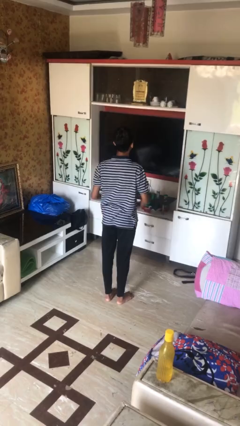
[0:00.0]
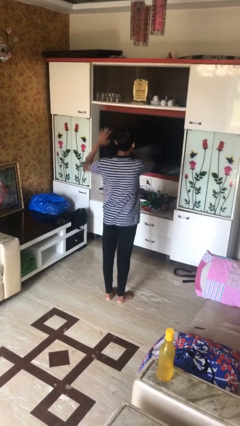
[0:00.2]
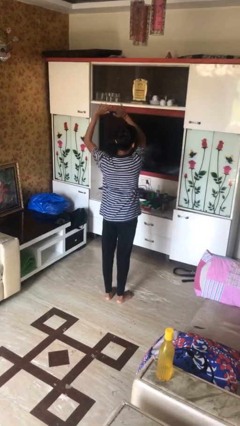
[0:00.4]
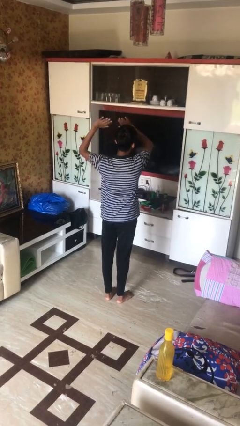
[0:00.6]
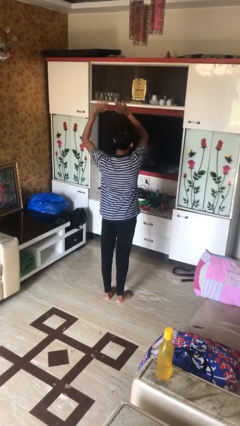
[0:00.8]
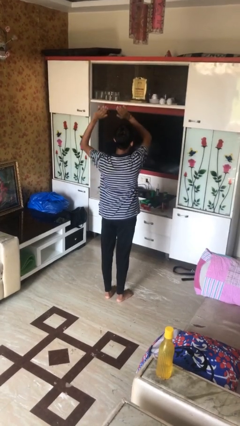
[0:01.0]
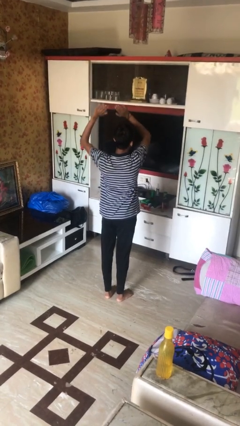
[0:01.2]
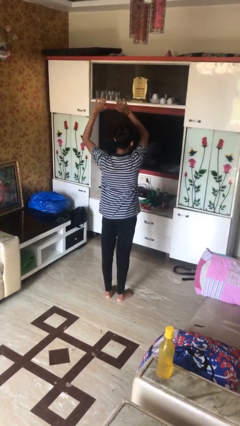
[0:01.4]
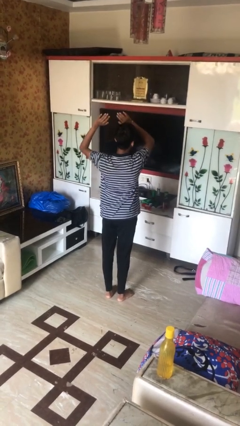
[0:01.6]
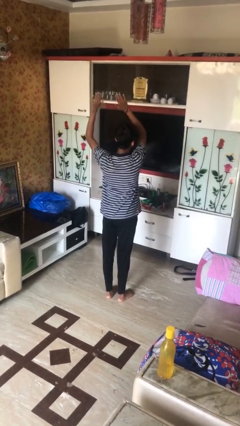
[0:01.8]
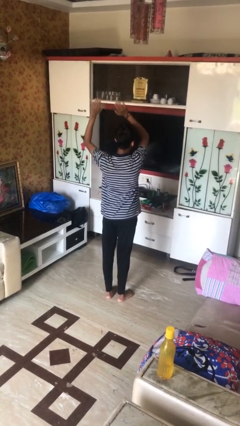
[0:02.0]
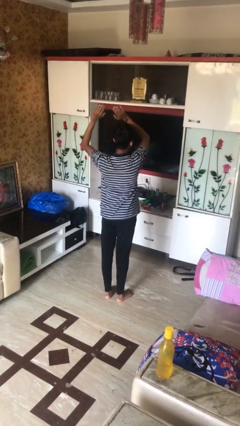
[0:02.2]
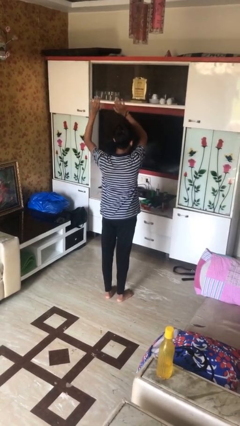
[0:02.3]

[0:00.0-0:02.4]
person dances in place

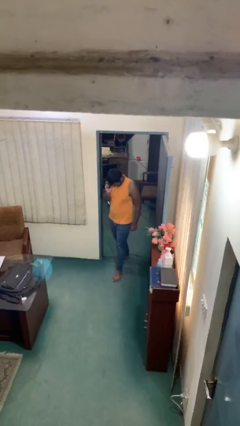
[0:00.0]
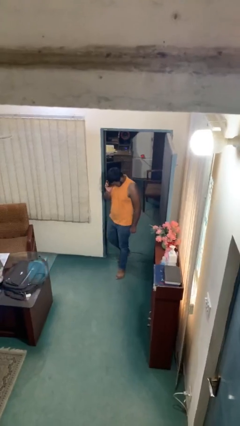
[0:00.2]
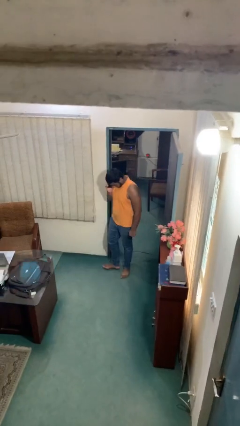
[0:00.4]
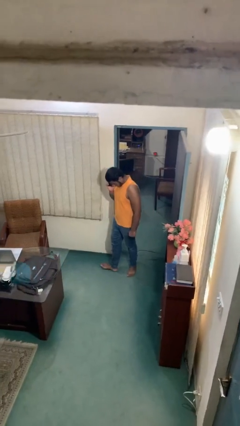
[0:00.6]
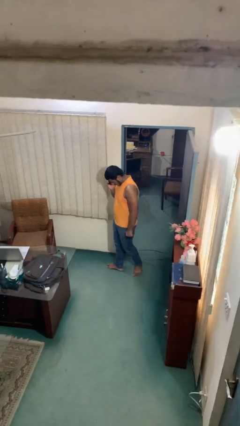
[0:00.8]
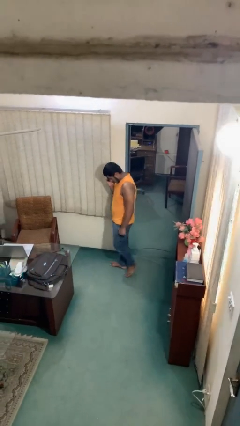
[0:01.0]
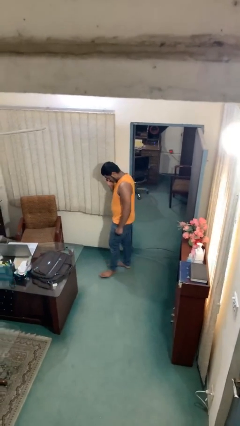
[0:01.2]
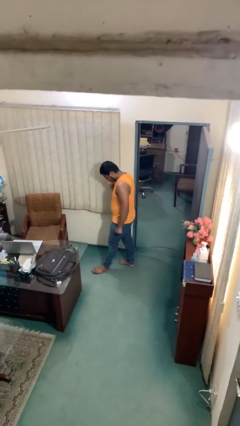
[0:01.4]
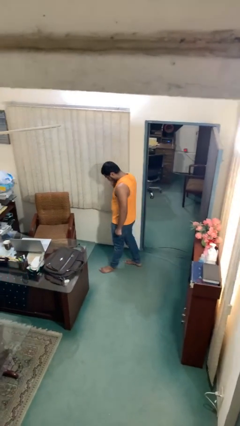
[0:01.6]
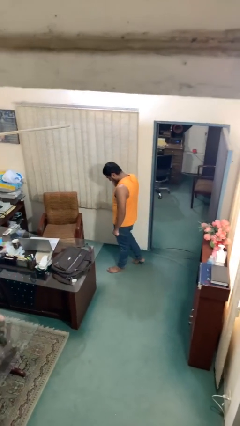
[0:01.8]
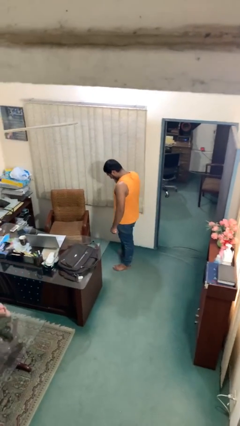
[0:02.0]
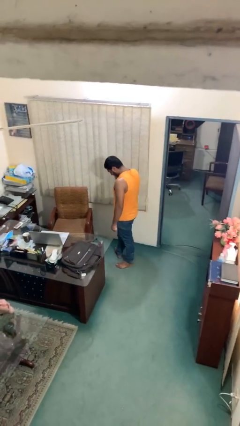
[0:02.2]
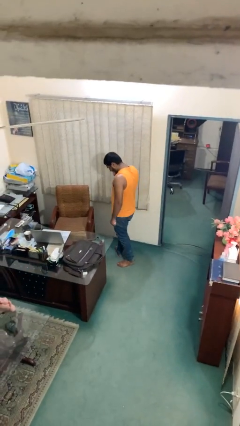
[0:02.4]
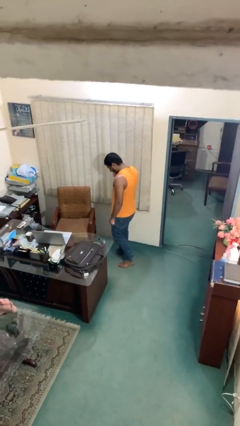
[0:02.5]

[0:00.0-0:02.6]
person enters scene through structure

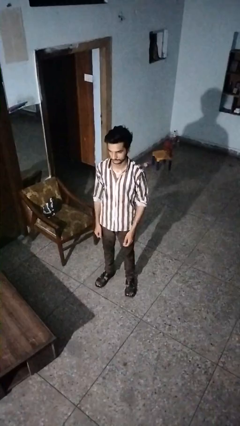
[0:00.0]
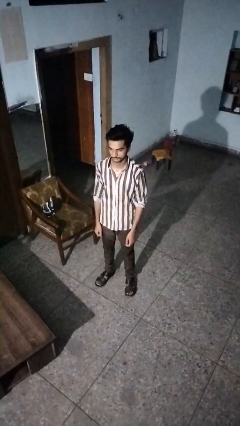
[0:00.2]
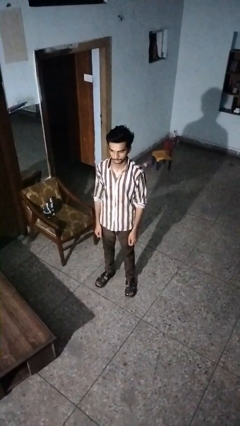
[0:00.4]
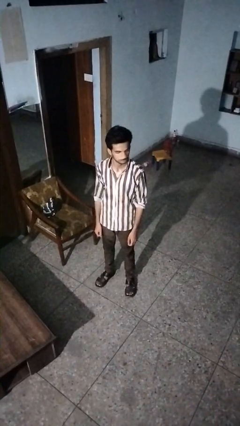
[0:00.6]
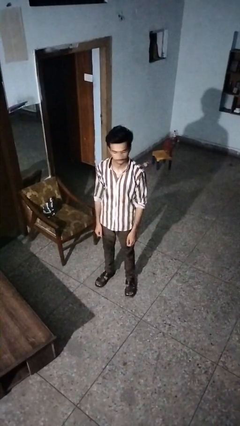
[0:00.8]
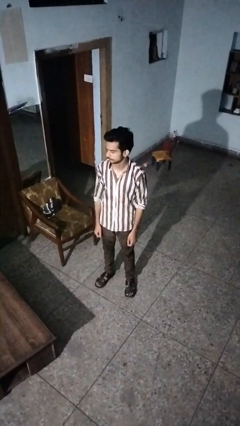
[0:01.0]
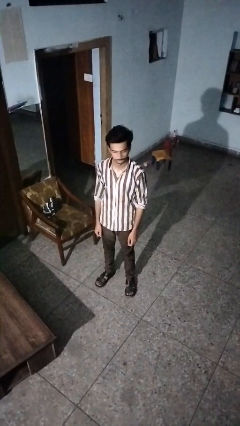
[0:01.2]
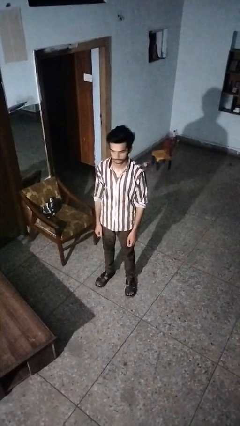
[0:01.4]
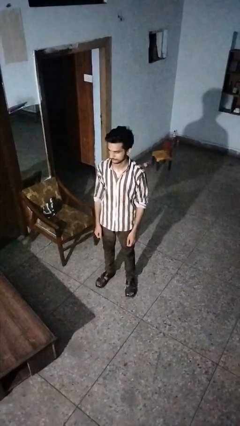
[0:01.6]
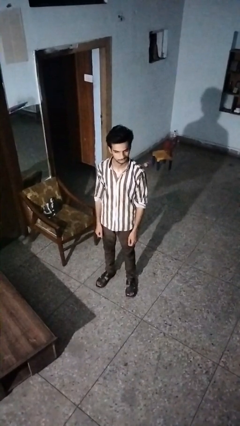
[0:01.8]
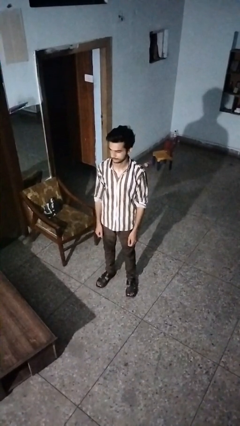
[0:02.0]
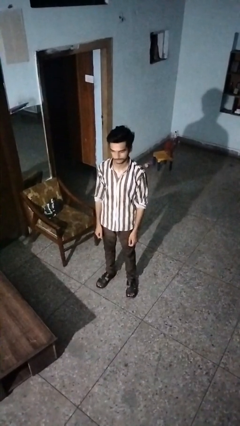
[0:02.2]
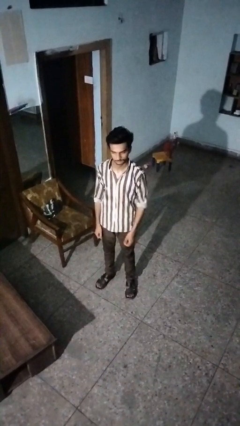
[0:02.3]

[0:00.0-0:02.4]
person shakes head

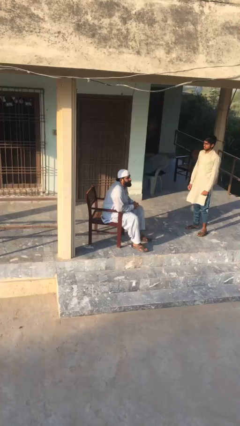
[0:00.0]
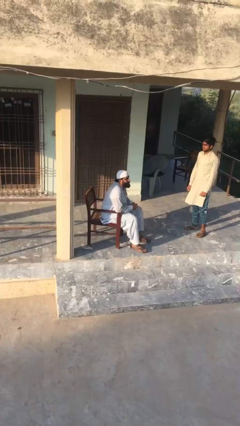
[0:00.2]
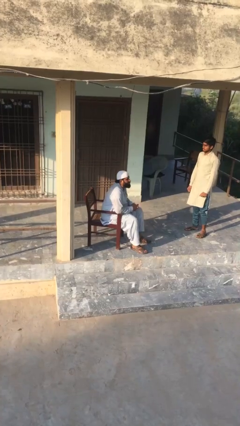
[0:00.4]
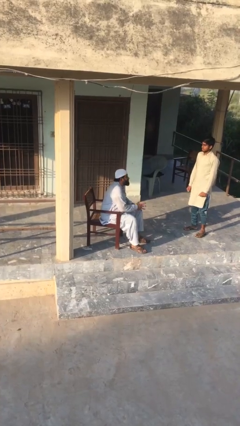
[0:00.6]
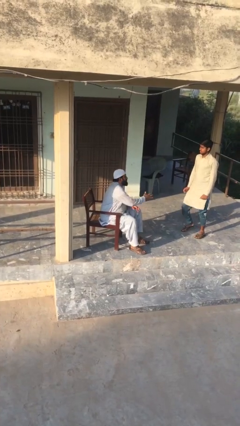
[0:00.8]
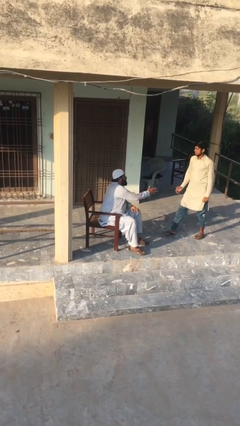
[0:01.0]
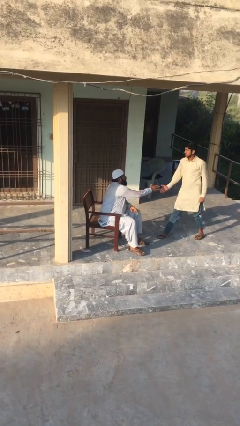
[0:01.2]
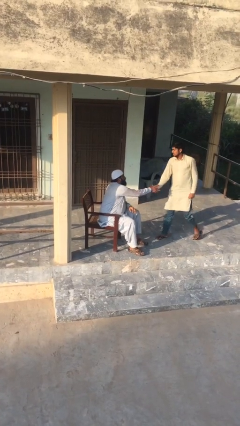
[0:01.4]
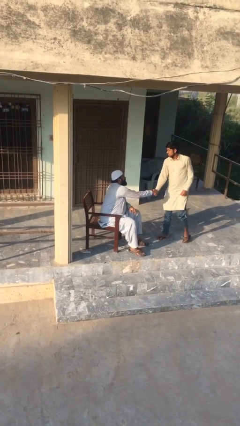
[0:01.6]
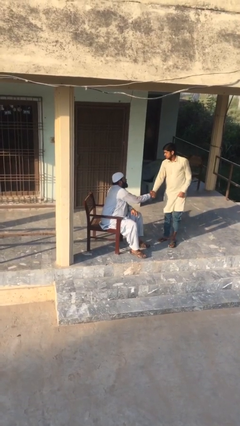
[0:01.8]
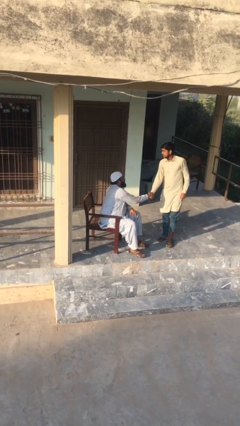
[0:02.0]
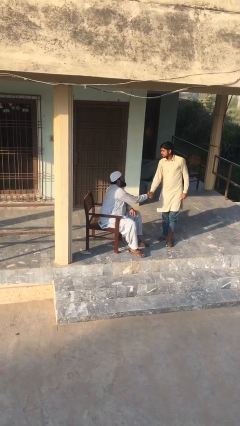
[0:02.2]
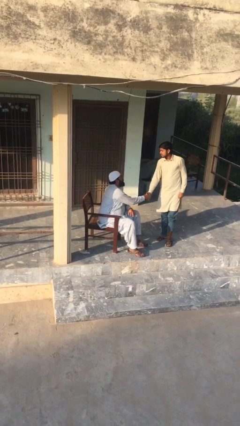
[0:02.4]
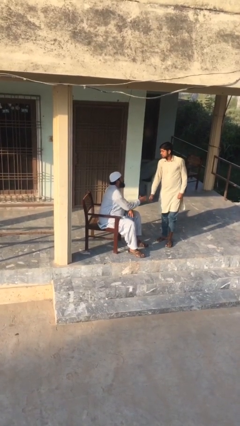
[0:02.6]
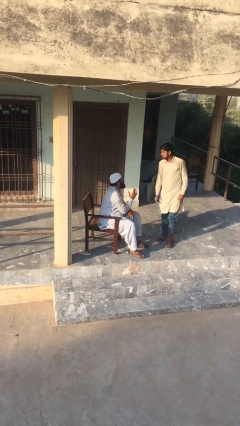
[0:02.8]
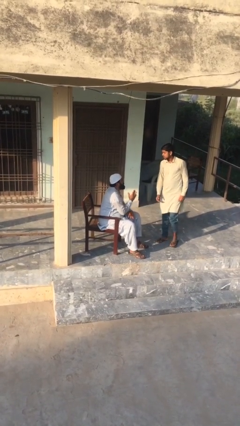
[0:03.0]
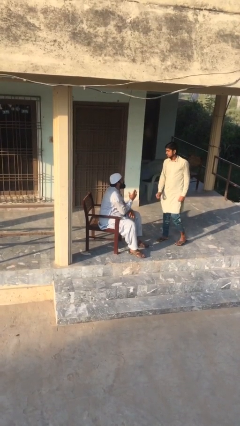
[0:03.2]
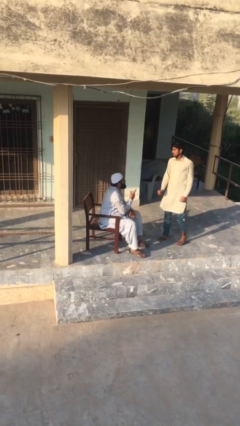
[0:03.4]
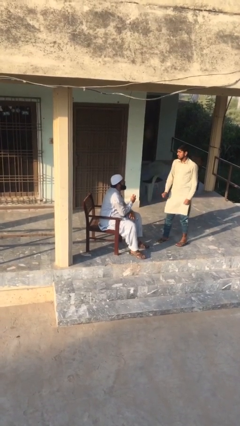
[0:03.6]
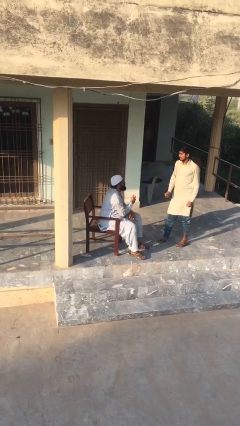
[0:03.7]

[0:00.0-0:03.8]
person shakes hand

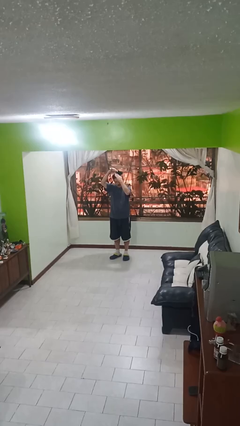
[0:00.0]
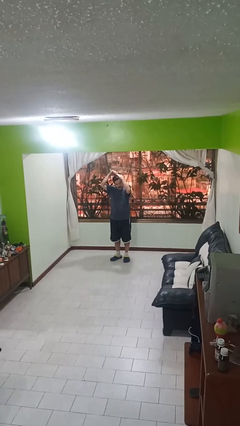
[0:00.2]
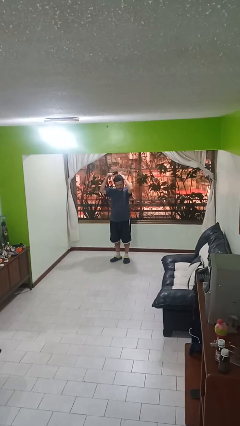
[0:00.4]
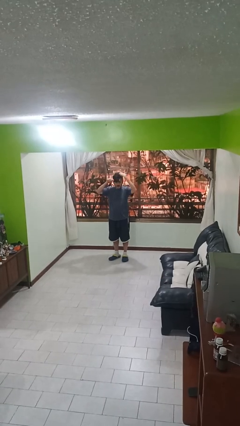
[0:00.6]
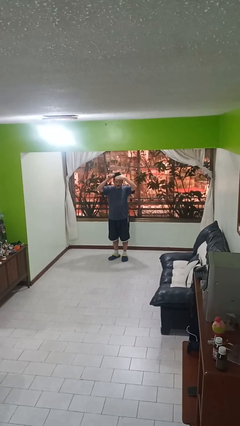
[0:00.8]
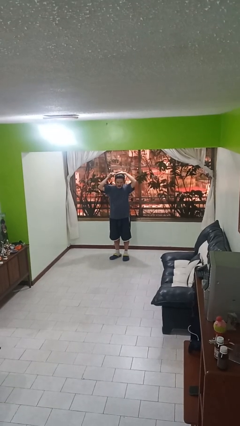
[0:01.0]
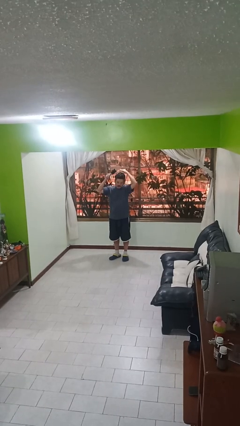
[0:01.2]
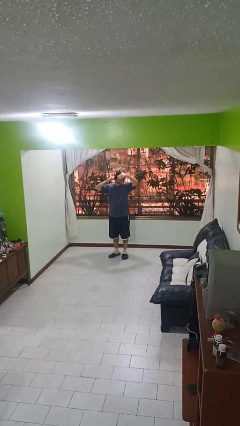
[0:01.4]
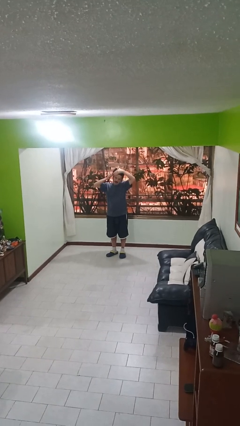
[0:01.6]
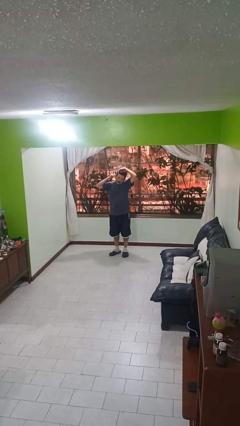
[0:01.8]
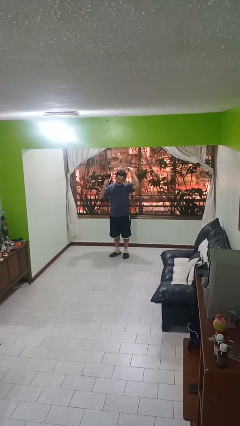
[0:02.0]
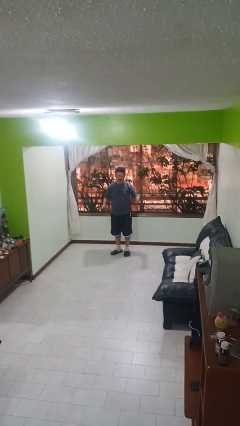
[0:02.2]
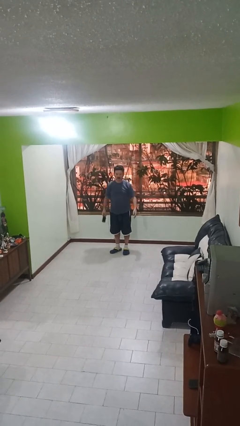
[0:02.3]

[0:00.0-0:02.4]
person brushes hair

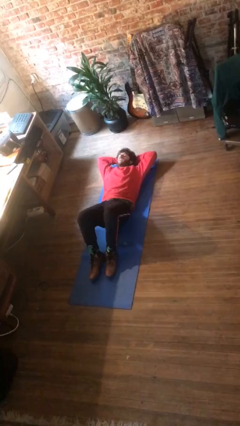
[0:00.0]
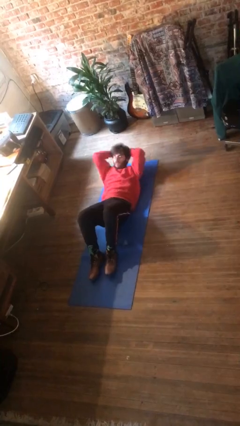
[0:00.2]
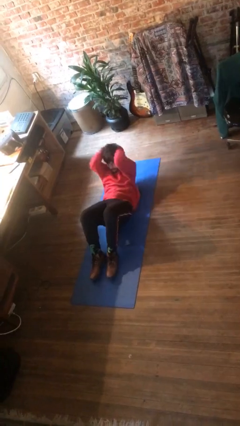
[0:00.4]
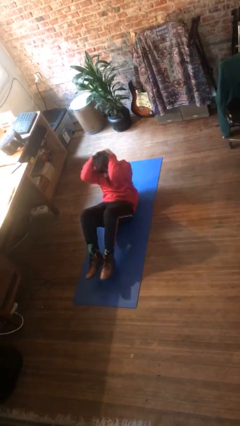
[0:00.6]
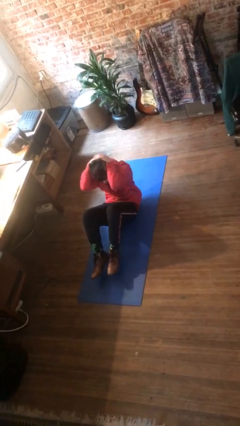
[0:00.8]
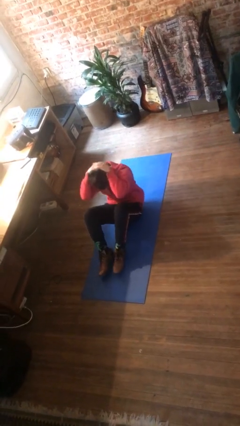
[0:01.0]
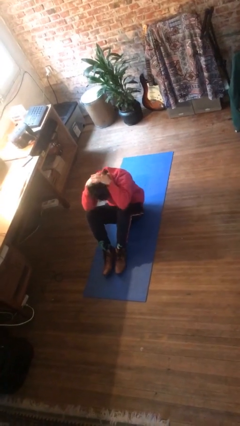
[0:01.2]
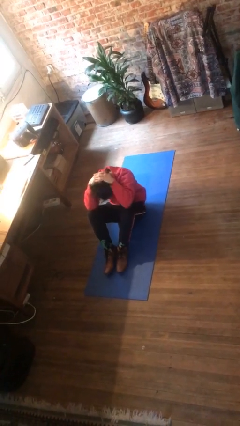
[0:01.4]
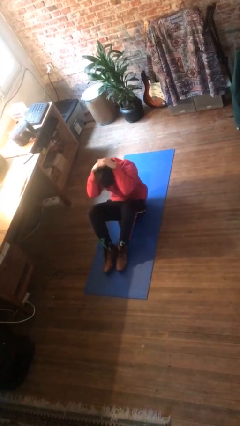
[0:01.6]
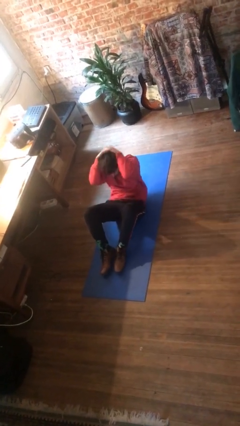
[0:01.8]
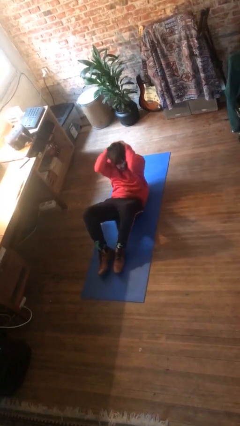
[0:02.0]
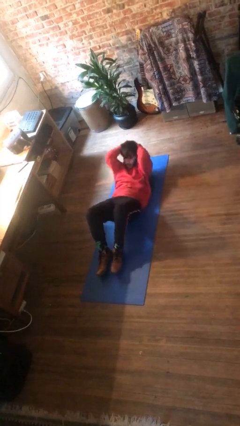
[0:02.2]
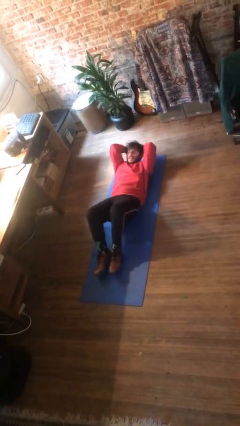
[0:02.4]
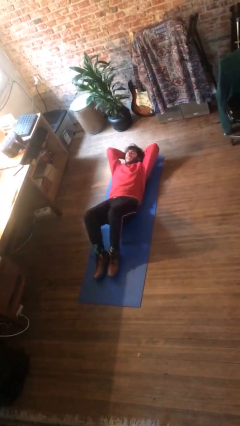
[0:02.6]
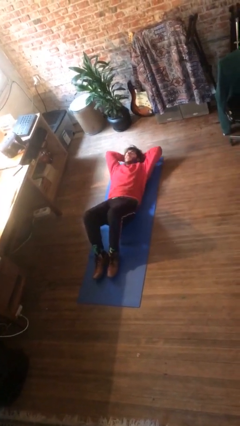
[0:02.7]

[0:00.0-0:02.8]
person exercises with situp

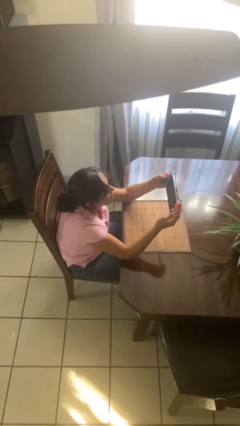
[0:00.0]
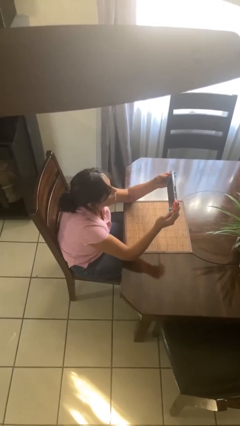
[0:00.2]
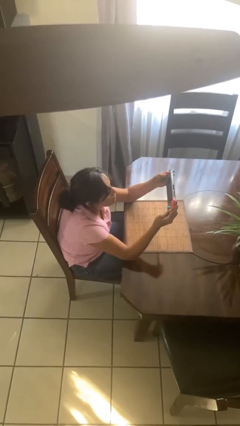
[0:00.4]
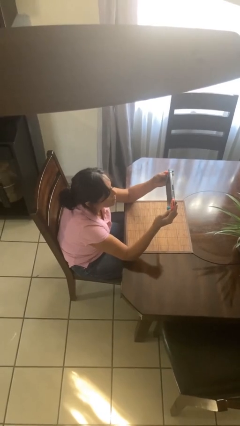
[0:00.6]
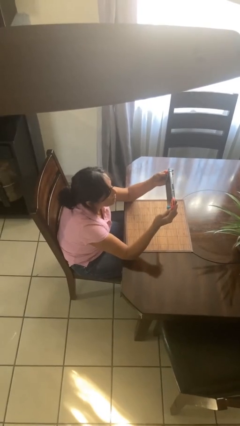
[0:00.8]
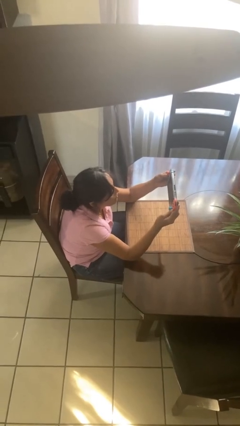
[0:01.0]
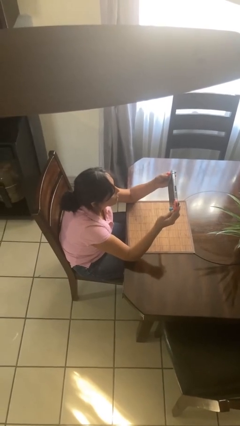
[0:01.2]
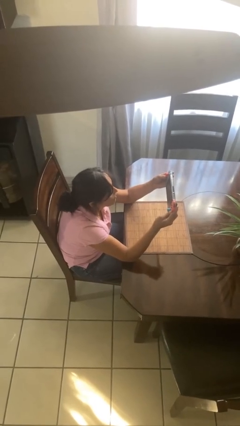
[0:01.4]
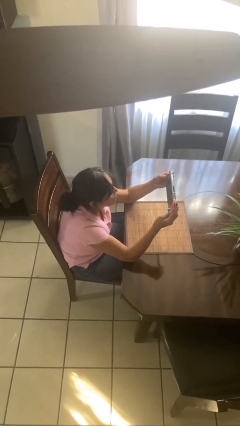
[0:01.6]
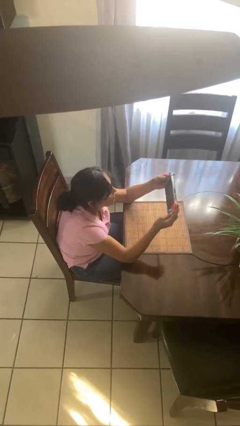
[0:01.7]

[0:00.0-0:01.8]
person interacts with handheld game
